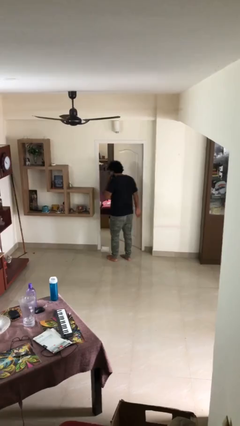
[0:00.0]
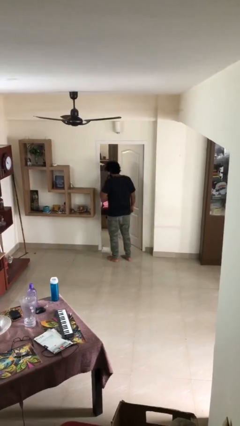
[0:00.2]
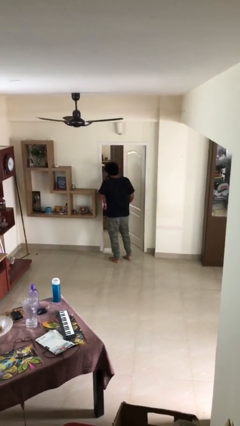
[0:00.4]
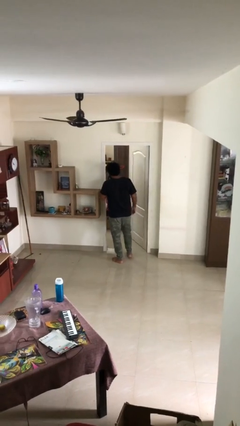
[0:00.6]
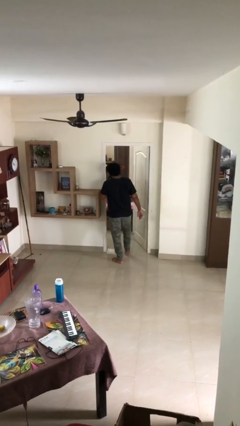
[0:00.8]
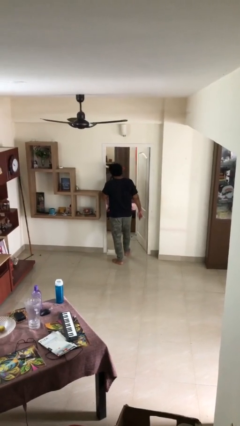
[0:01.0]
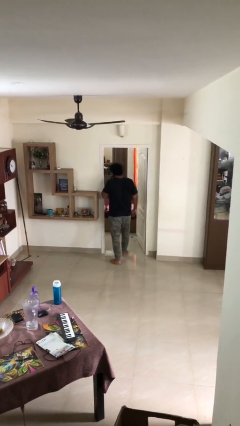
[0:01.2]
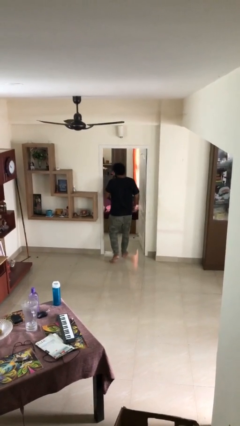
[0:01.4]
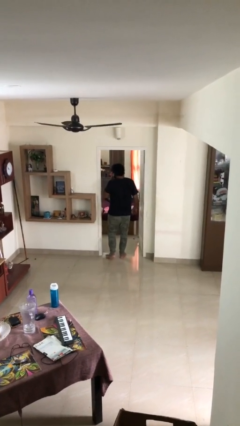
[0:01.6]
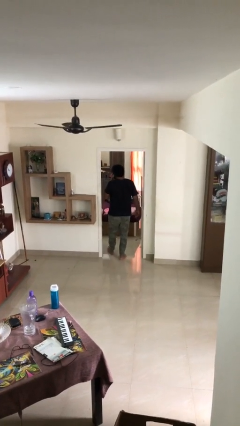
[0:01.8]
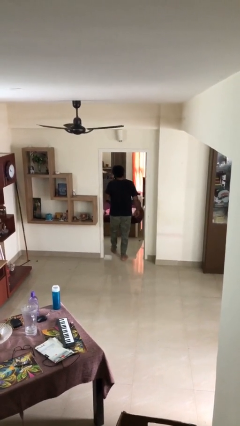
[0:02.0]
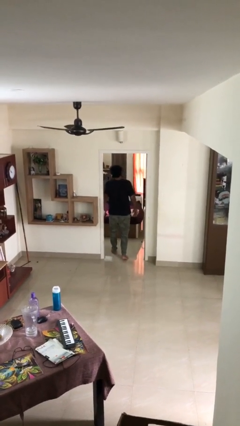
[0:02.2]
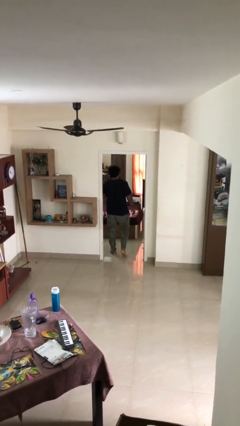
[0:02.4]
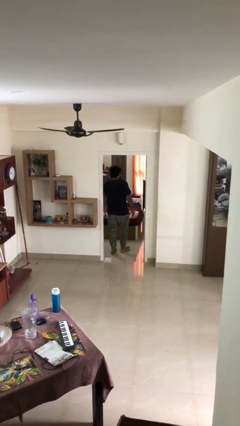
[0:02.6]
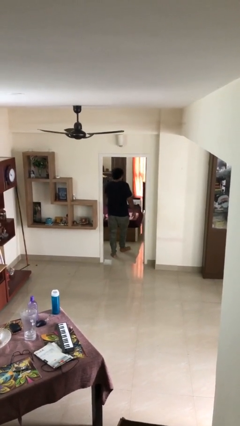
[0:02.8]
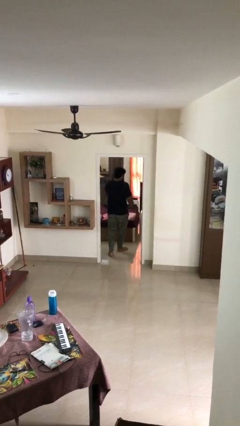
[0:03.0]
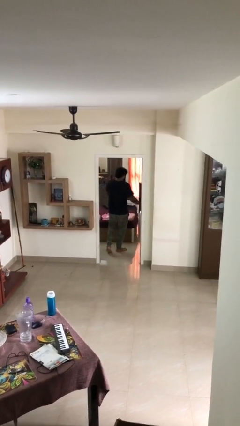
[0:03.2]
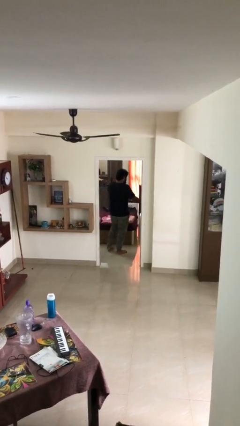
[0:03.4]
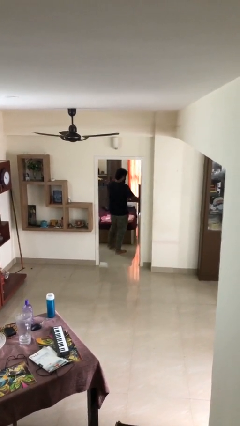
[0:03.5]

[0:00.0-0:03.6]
person exits scene through structure

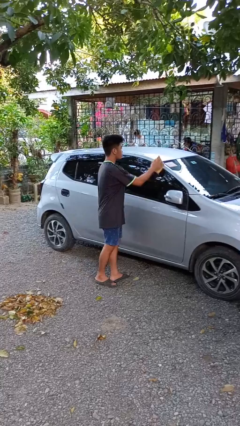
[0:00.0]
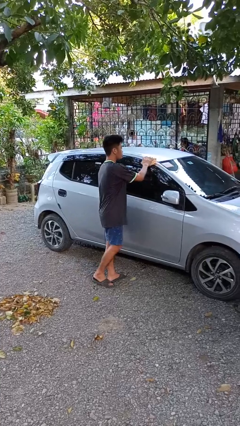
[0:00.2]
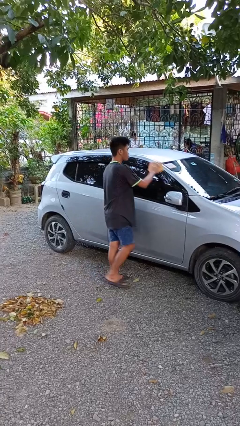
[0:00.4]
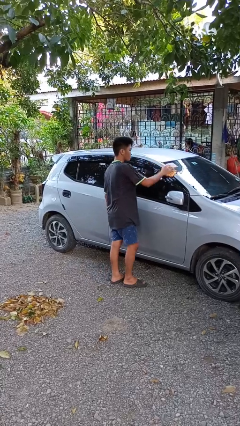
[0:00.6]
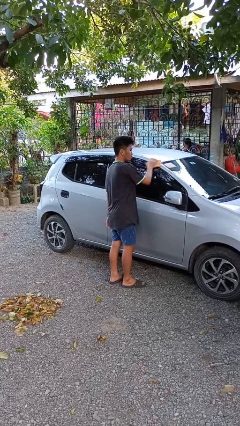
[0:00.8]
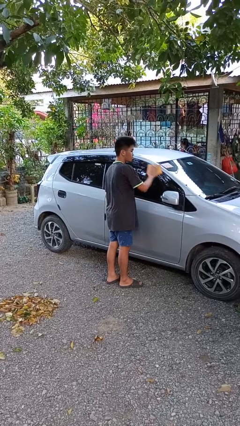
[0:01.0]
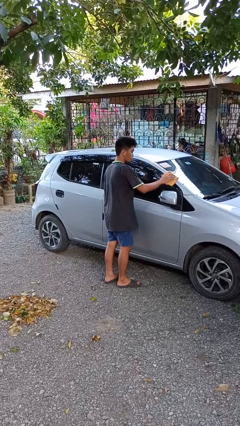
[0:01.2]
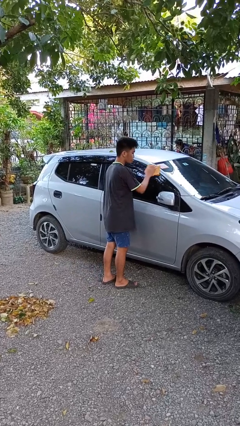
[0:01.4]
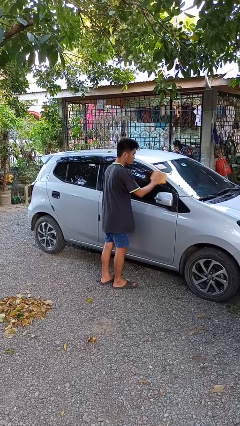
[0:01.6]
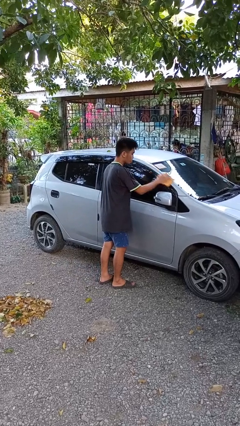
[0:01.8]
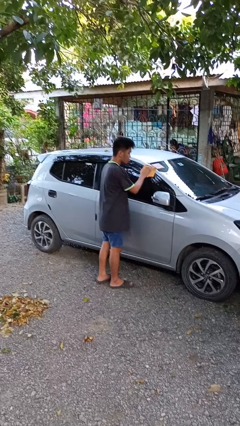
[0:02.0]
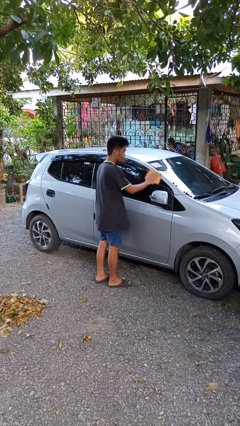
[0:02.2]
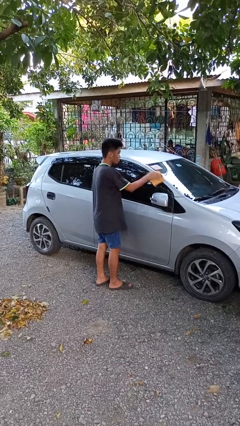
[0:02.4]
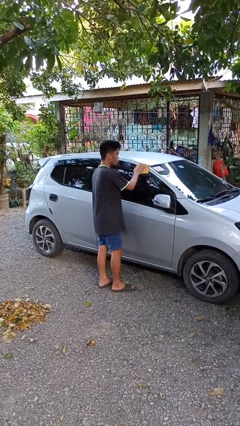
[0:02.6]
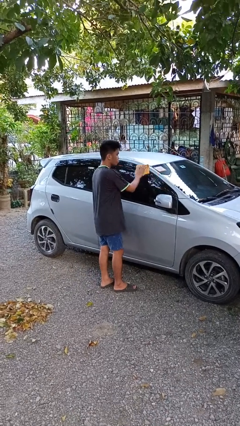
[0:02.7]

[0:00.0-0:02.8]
person polishes car with rag

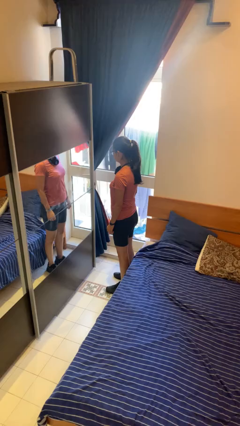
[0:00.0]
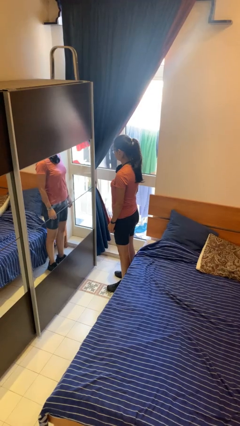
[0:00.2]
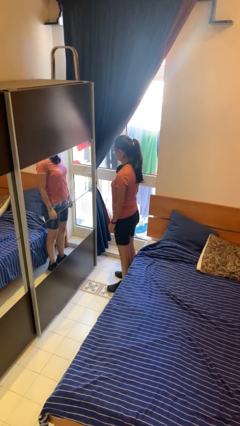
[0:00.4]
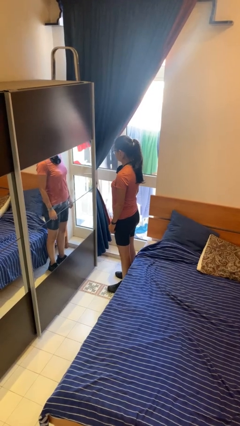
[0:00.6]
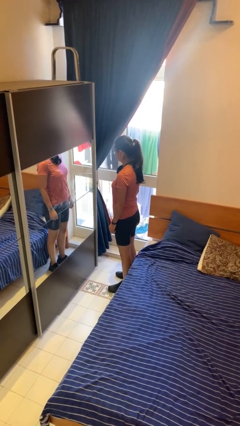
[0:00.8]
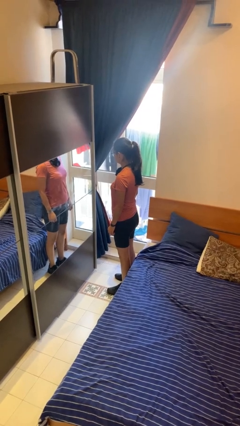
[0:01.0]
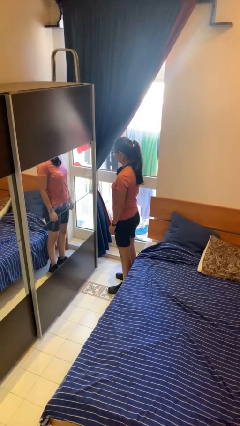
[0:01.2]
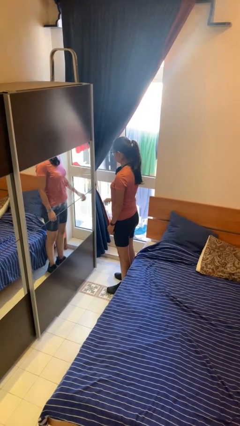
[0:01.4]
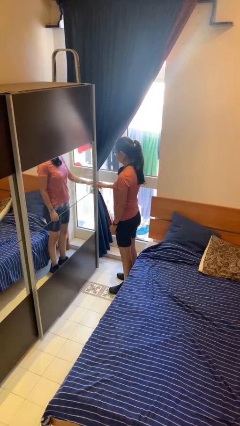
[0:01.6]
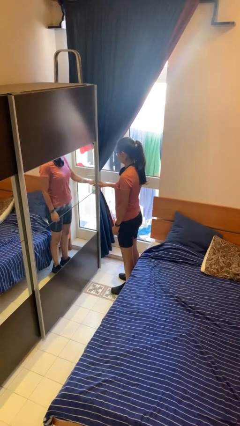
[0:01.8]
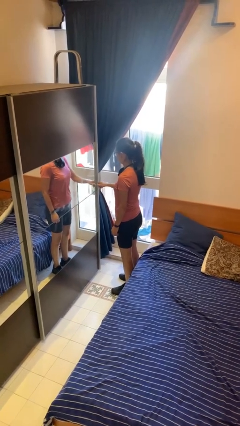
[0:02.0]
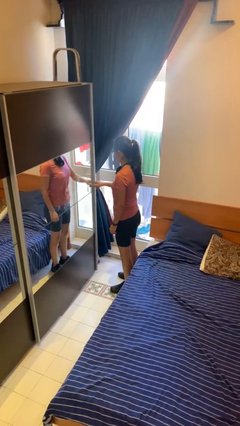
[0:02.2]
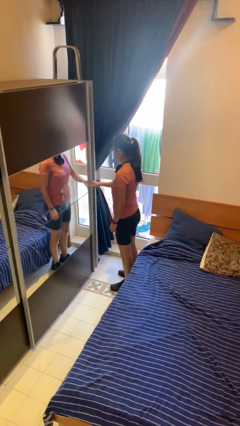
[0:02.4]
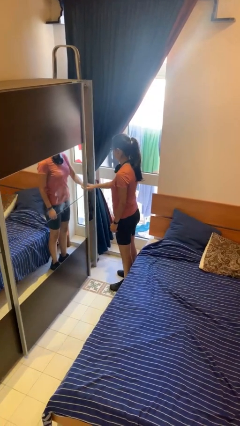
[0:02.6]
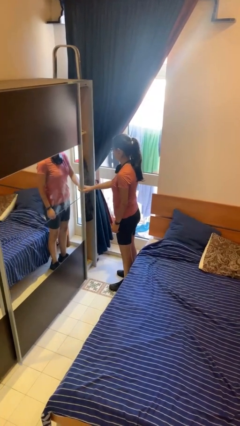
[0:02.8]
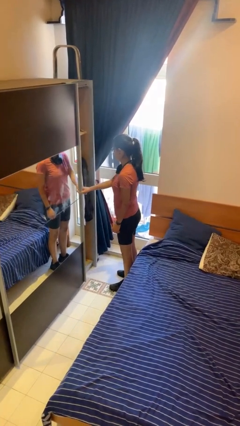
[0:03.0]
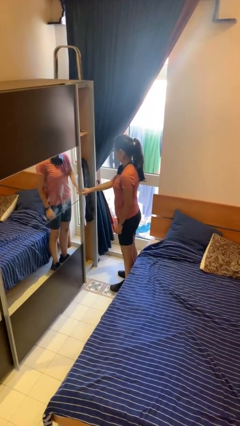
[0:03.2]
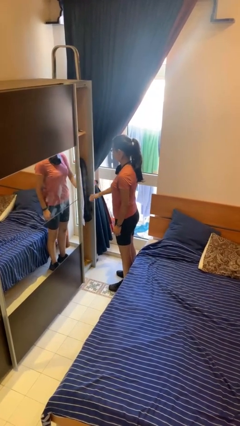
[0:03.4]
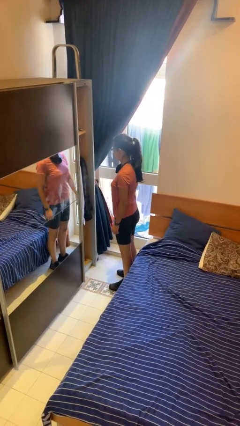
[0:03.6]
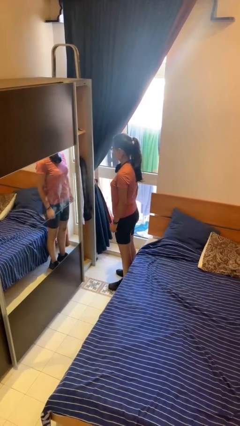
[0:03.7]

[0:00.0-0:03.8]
person opens closet door

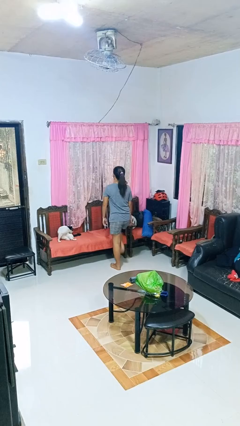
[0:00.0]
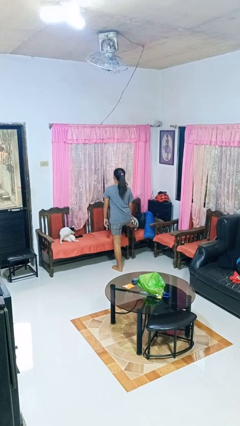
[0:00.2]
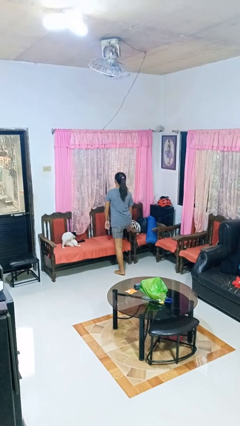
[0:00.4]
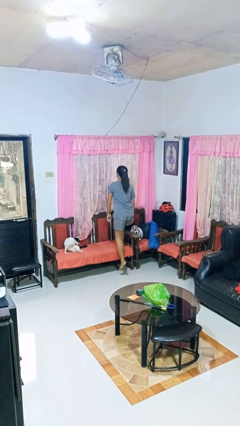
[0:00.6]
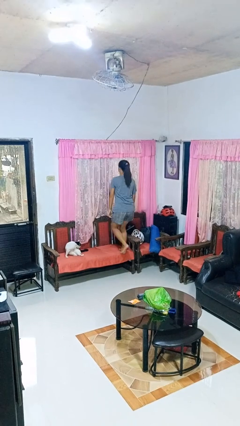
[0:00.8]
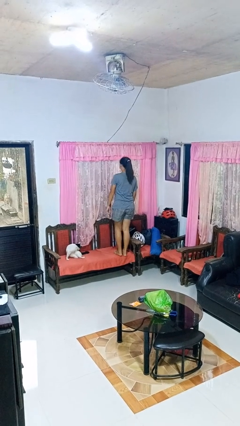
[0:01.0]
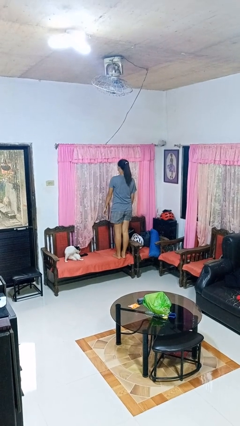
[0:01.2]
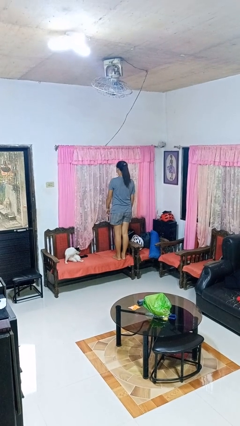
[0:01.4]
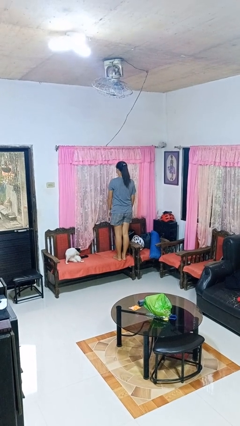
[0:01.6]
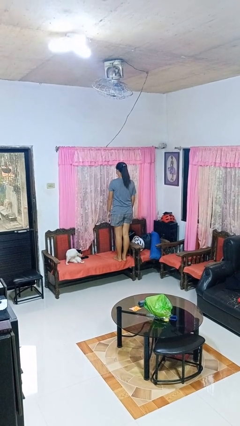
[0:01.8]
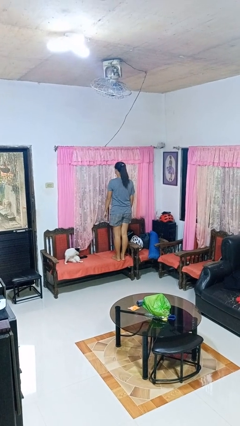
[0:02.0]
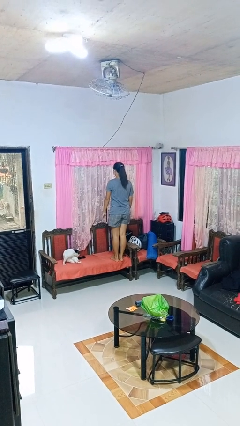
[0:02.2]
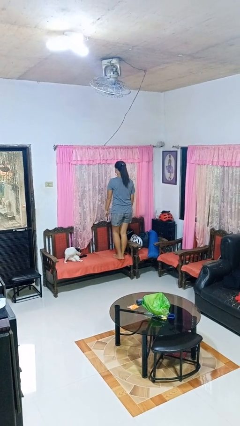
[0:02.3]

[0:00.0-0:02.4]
person climbs on chair

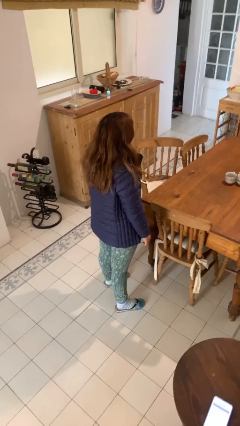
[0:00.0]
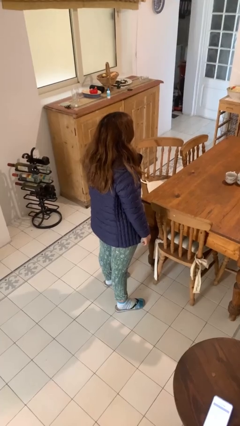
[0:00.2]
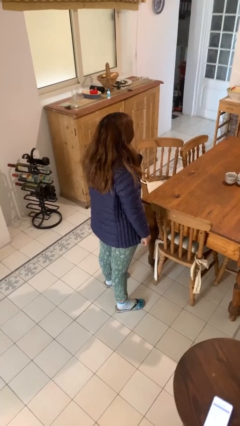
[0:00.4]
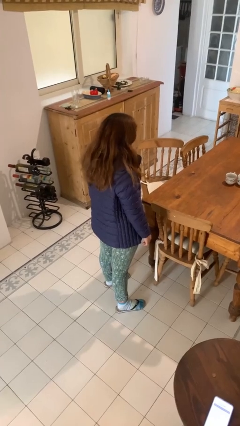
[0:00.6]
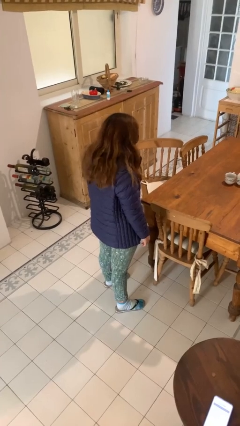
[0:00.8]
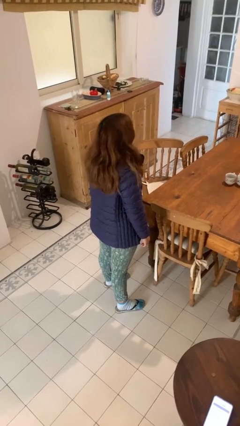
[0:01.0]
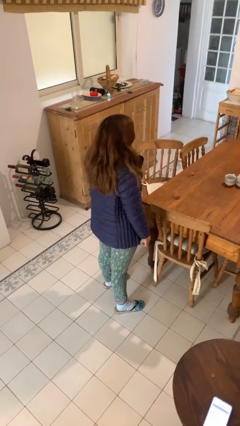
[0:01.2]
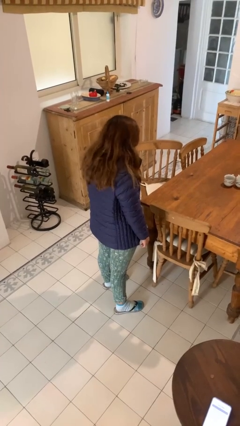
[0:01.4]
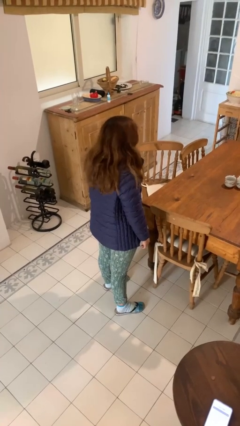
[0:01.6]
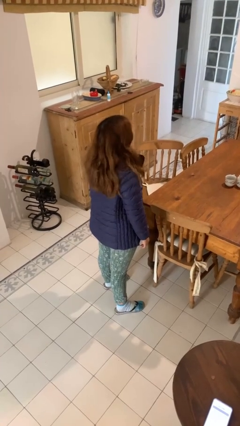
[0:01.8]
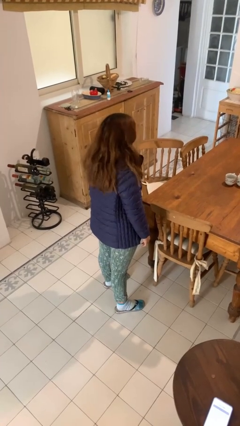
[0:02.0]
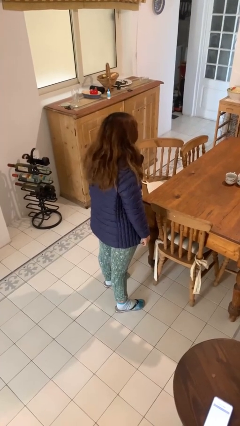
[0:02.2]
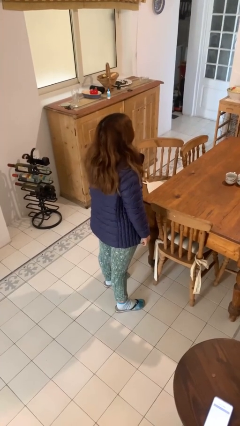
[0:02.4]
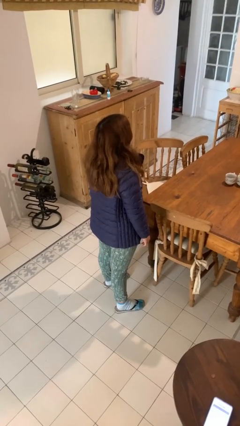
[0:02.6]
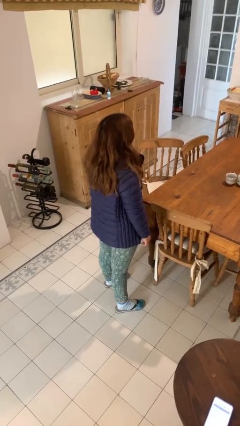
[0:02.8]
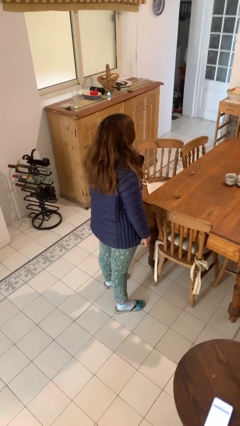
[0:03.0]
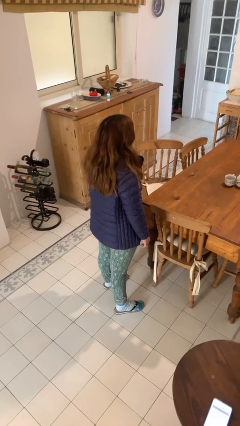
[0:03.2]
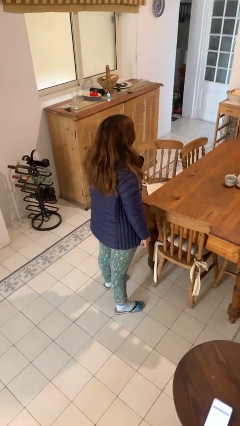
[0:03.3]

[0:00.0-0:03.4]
person nods head

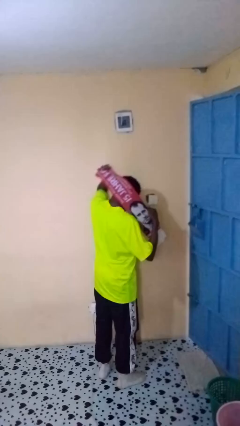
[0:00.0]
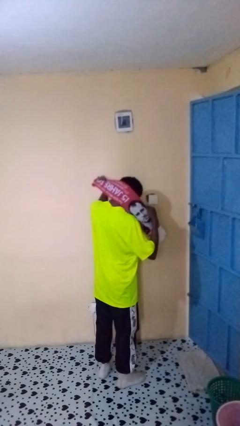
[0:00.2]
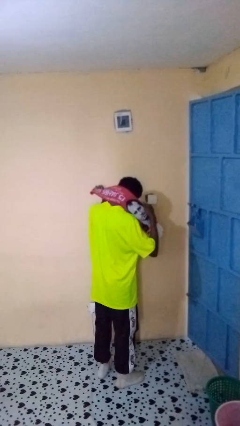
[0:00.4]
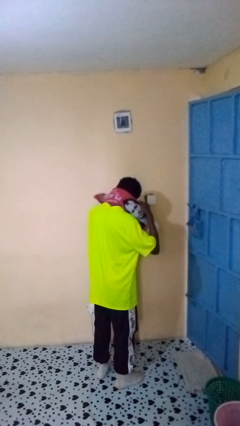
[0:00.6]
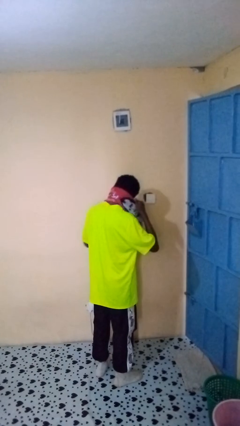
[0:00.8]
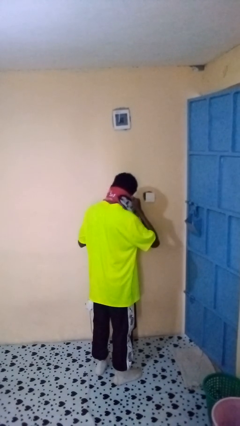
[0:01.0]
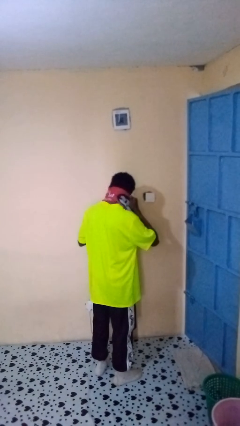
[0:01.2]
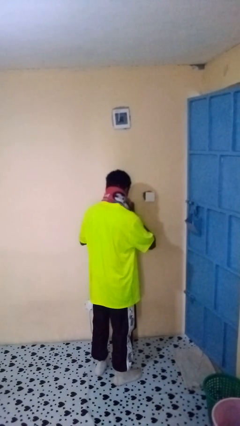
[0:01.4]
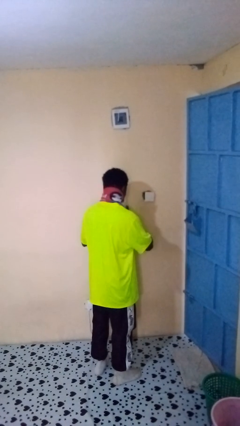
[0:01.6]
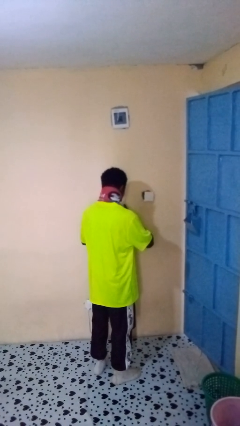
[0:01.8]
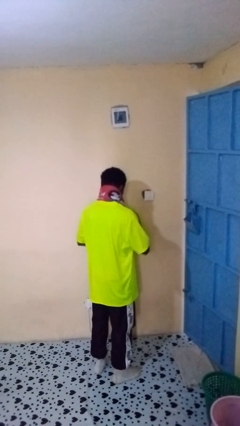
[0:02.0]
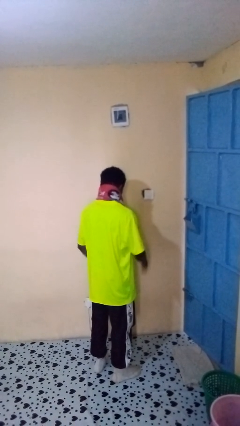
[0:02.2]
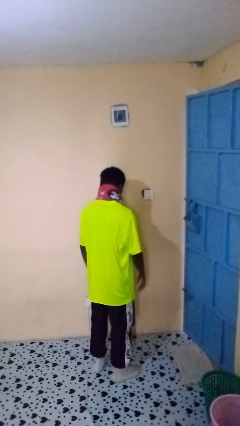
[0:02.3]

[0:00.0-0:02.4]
person puts on scarf
